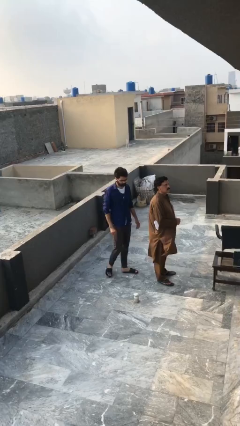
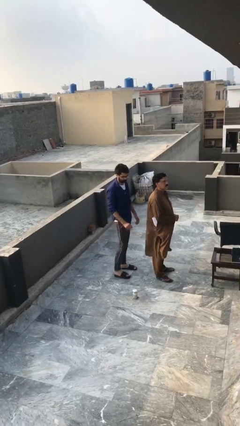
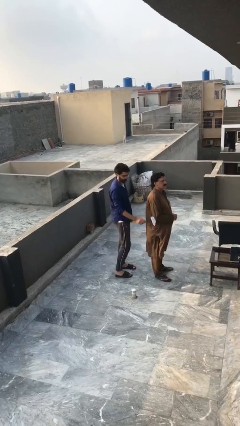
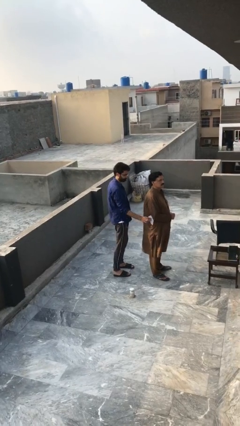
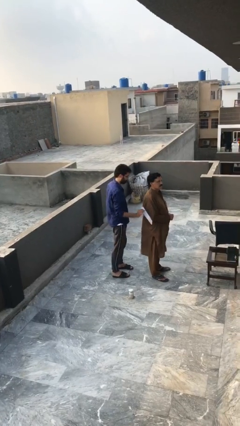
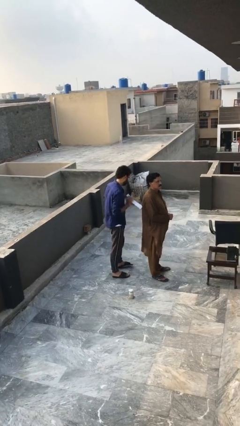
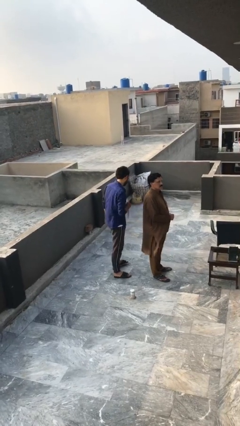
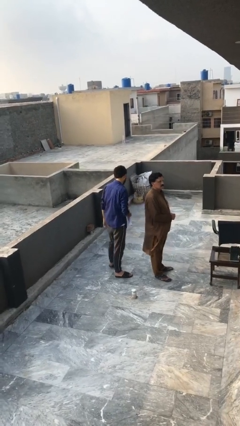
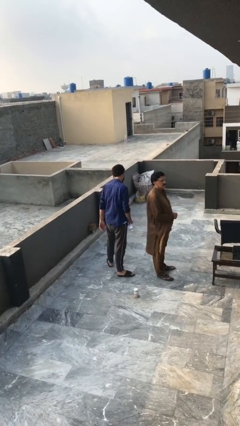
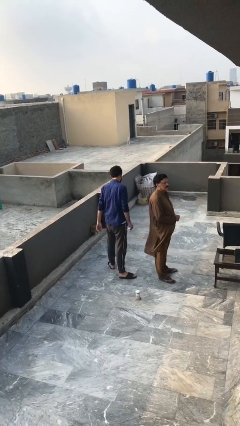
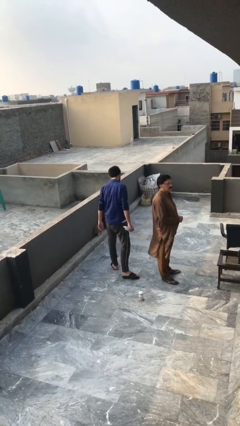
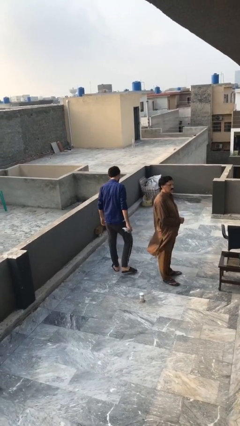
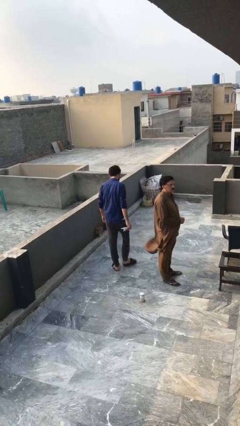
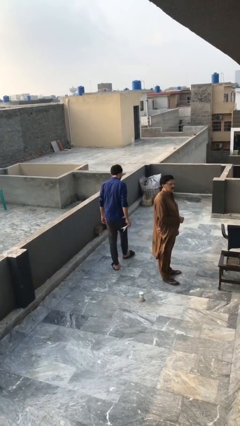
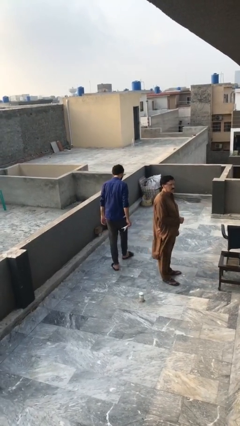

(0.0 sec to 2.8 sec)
person steals object from person

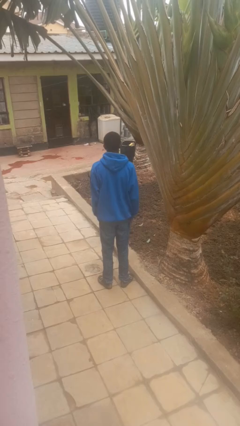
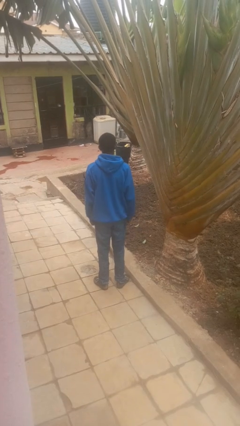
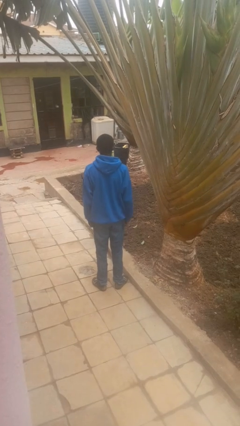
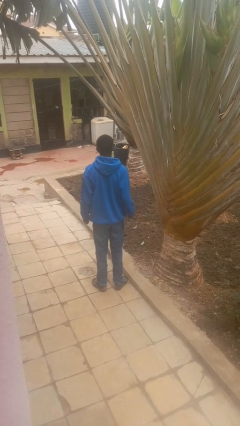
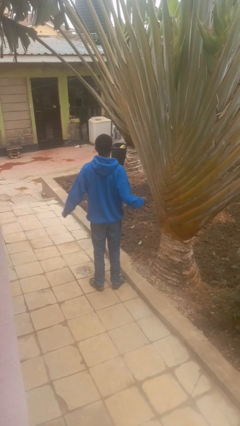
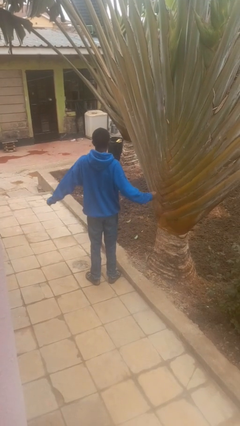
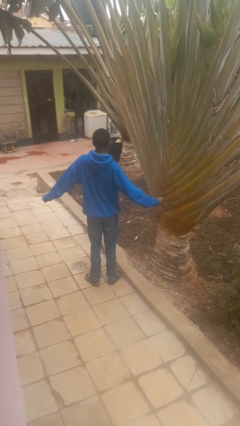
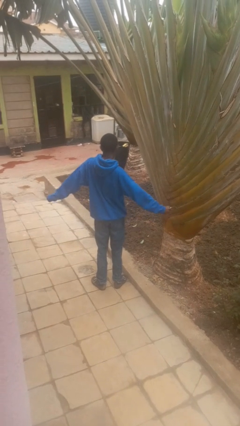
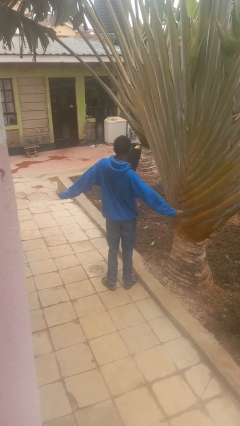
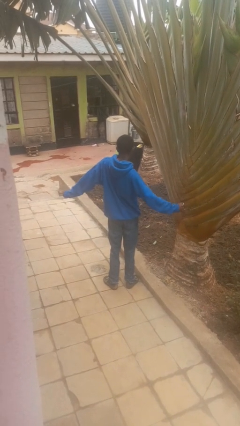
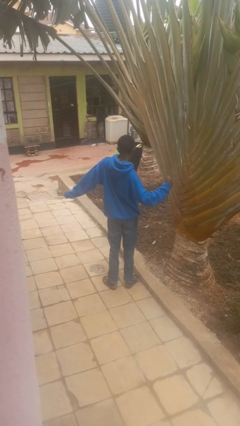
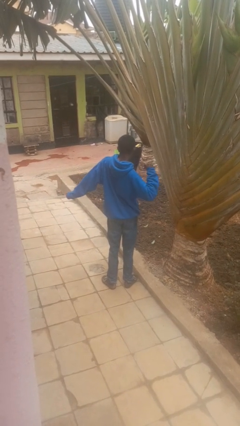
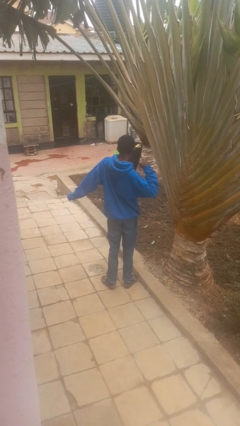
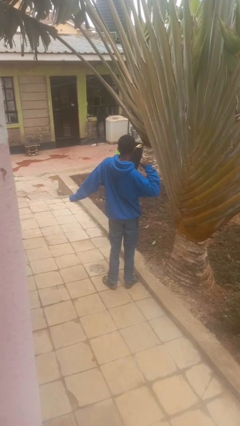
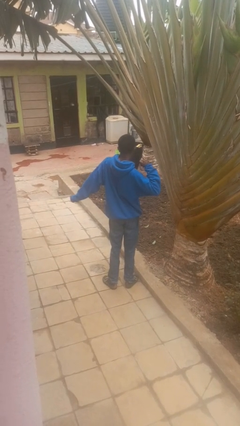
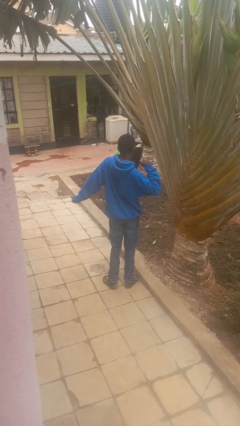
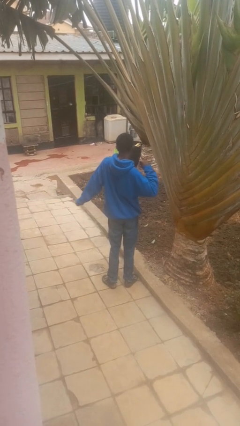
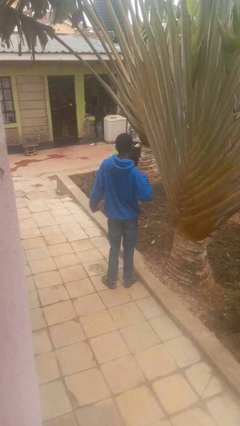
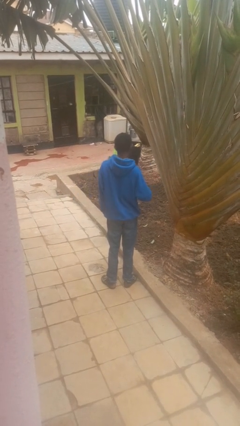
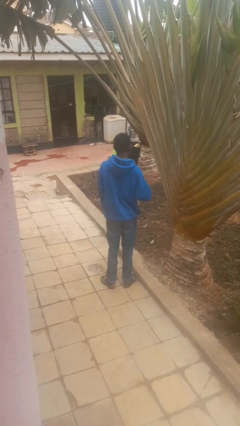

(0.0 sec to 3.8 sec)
person stretches arms to side

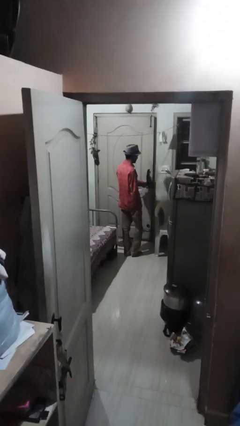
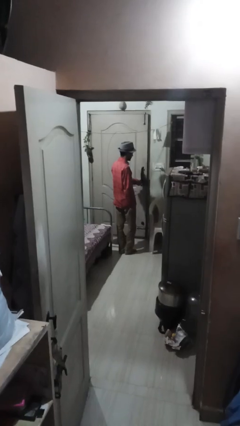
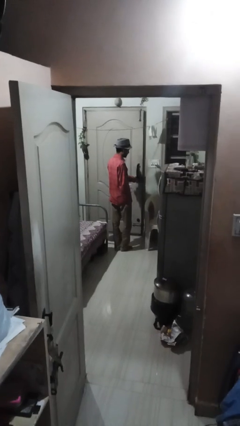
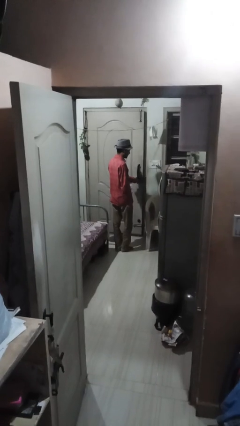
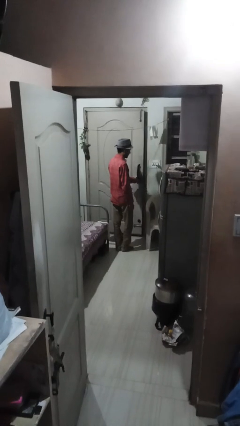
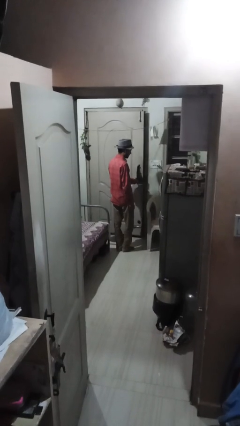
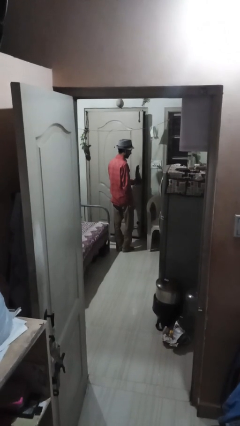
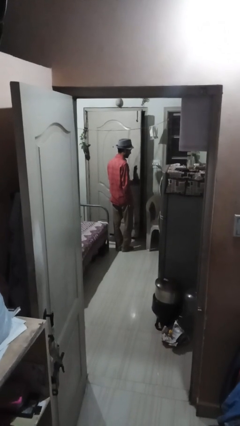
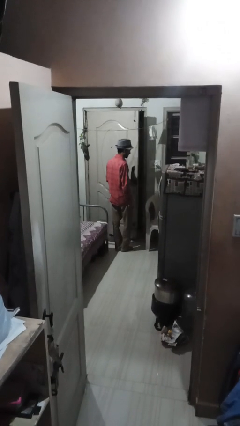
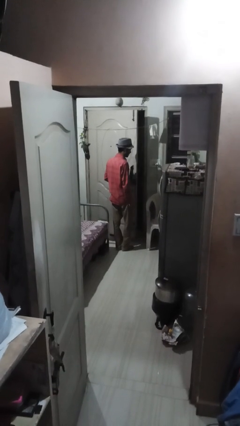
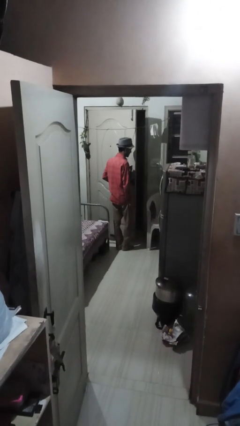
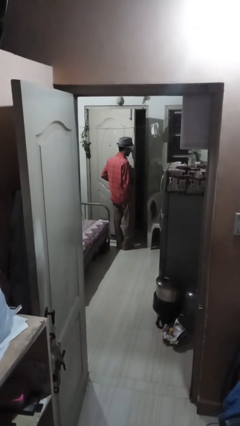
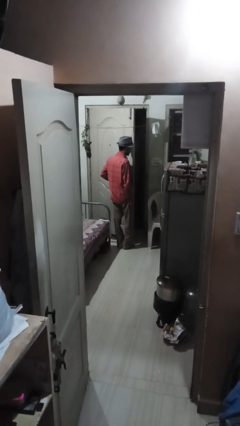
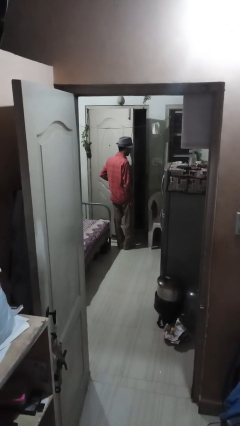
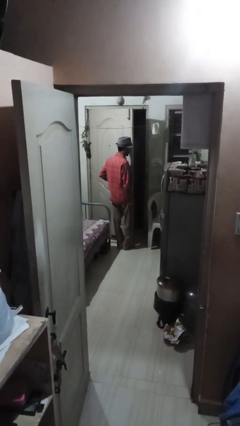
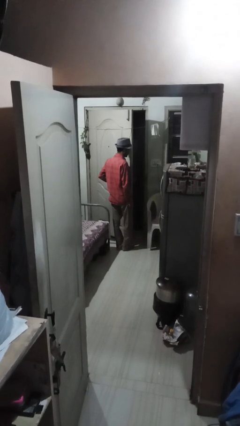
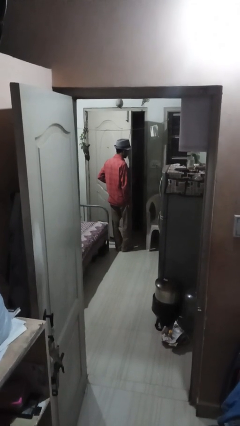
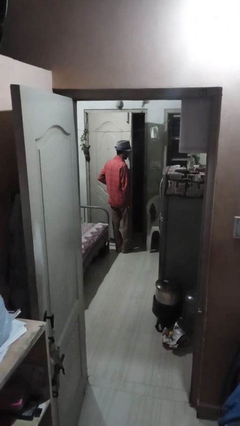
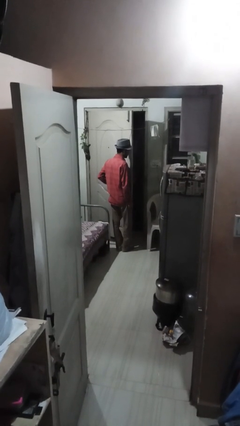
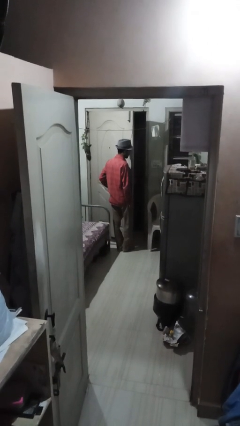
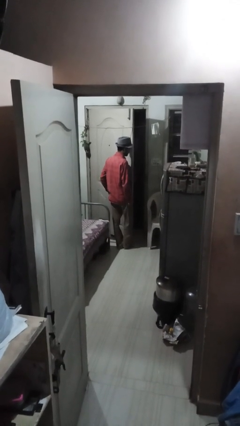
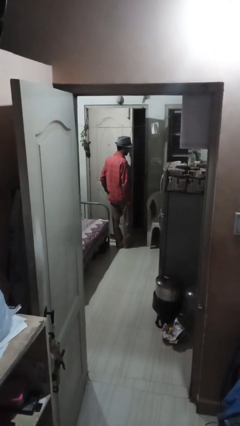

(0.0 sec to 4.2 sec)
person opens facility door

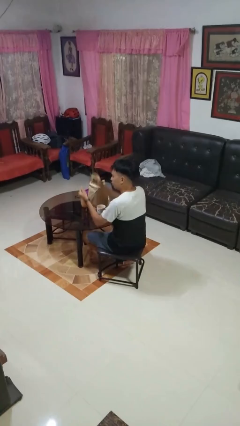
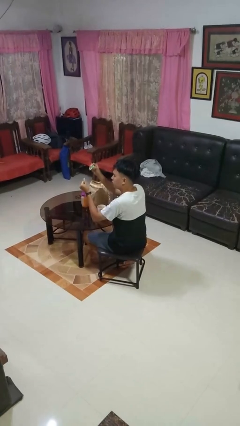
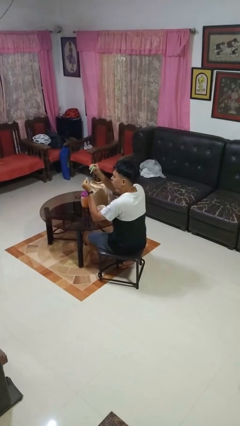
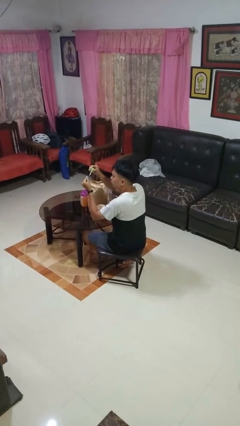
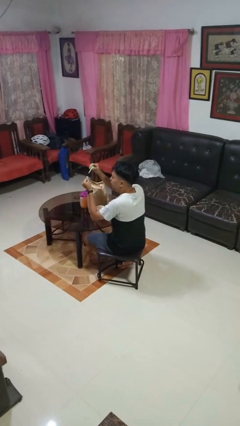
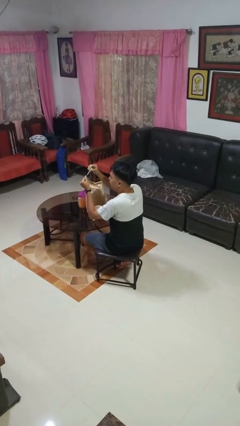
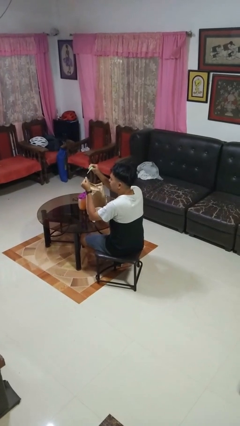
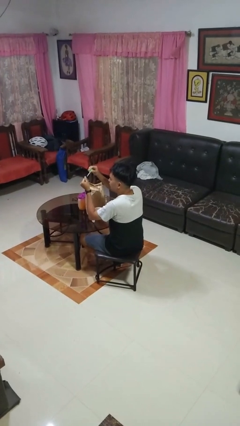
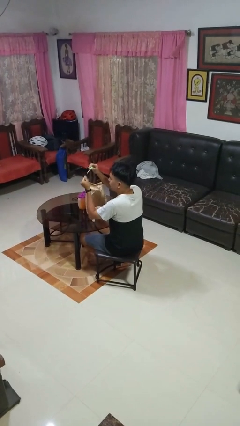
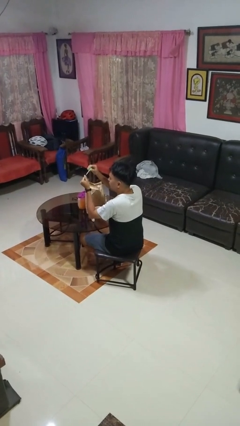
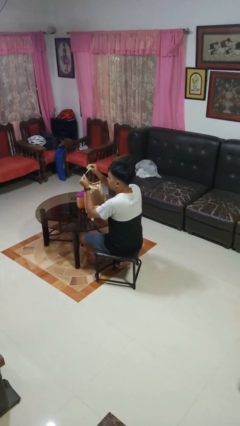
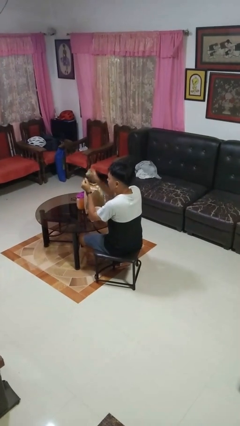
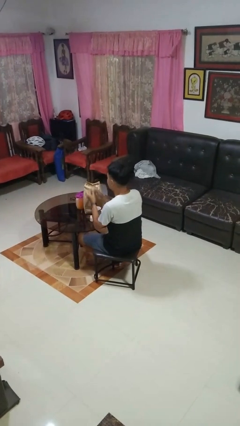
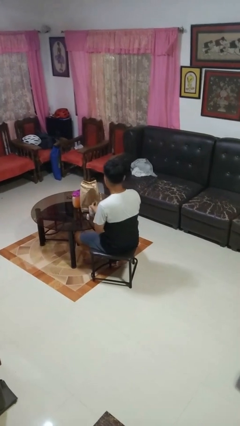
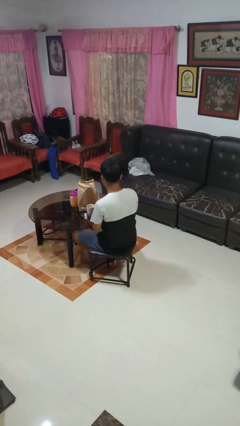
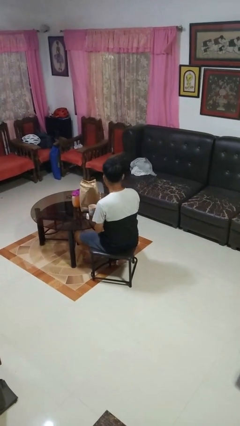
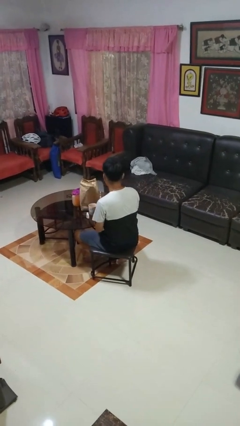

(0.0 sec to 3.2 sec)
person paints fingernails

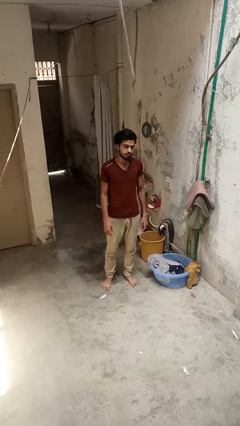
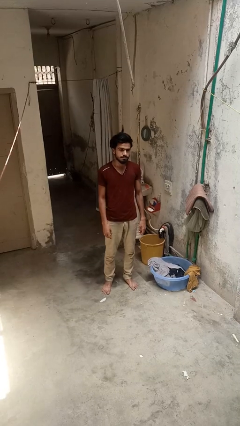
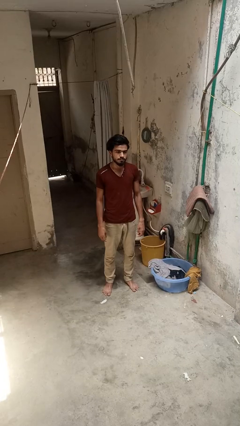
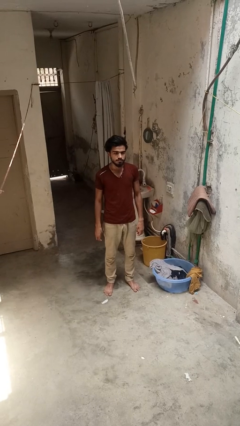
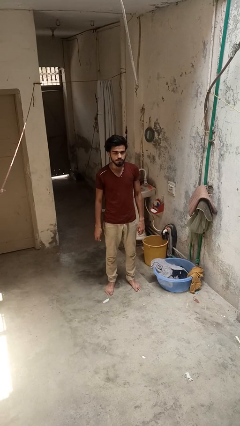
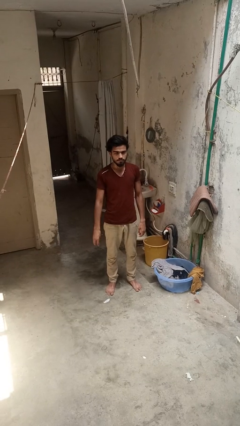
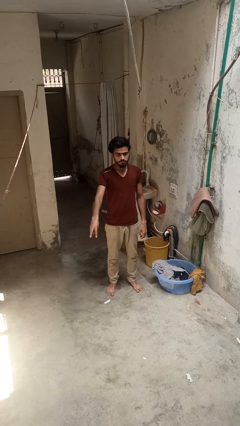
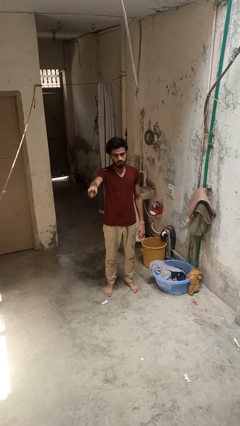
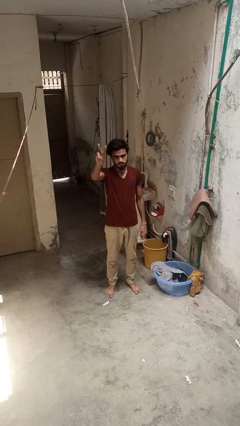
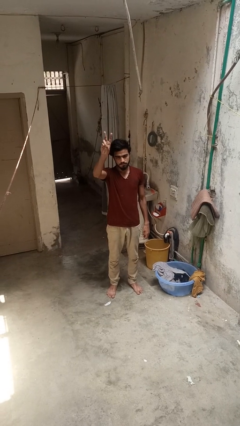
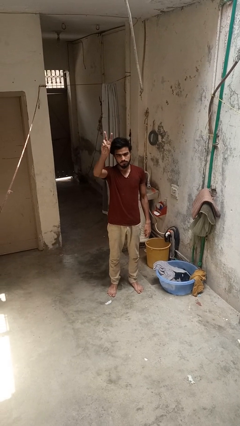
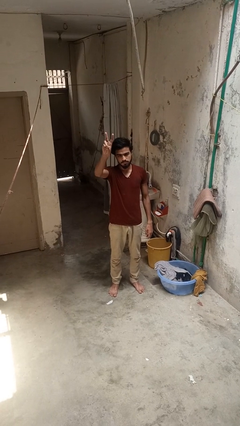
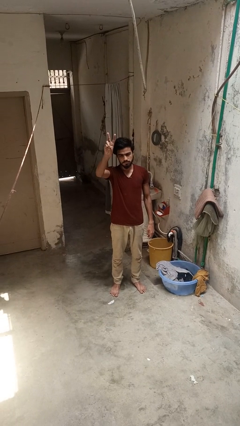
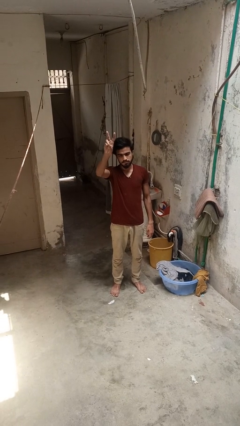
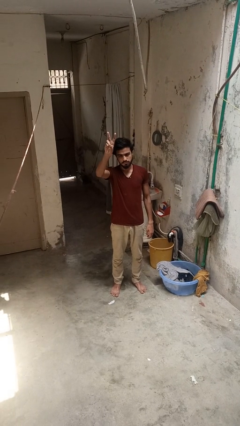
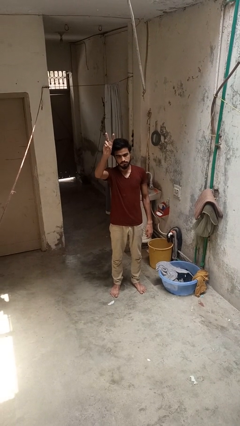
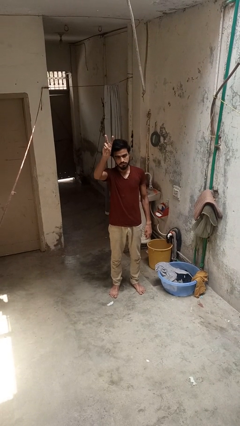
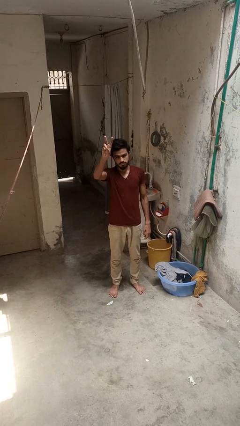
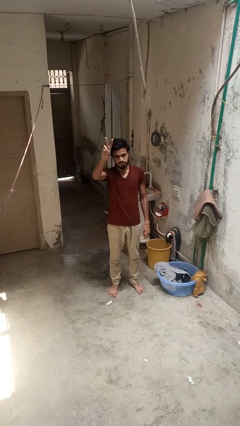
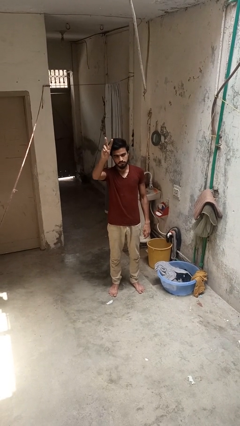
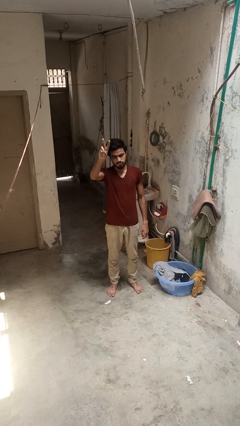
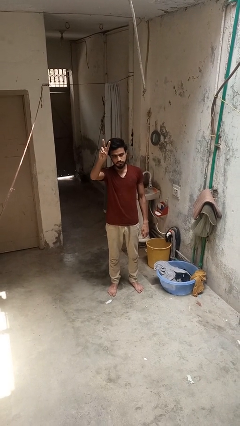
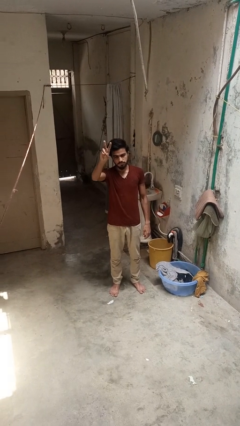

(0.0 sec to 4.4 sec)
person gestures peace
